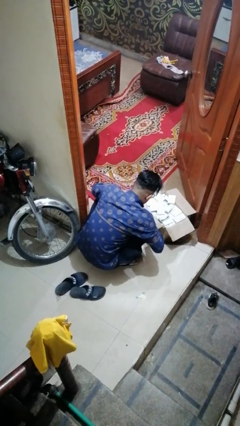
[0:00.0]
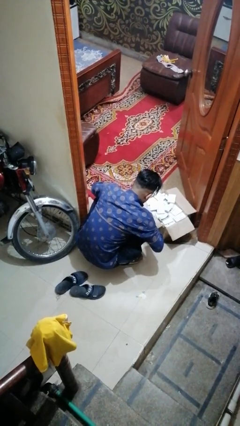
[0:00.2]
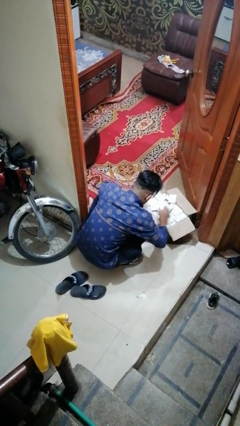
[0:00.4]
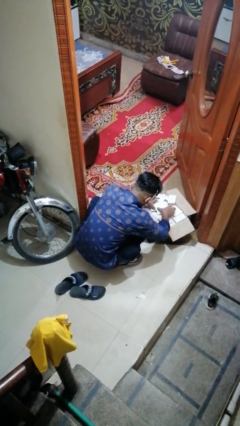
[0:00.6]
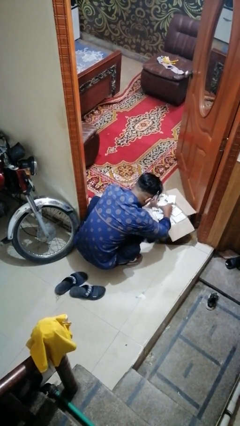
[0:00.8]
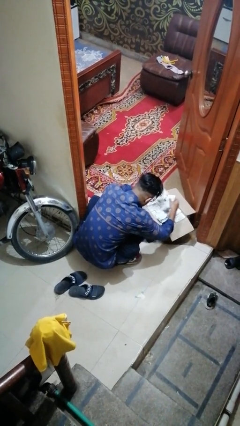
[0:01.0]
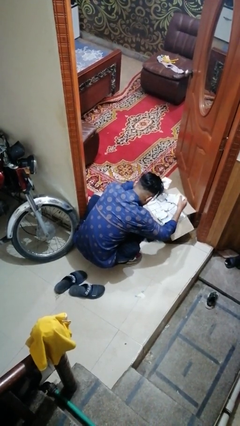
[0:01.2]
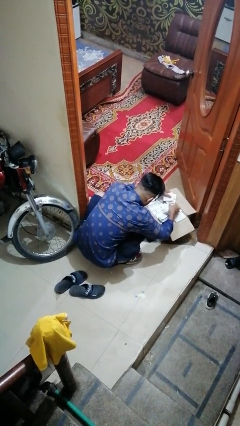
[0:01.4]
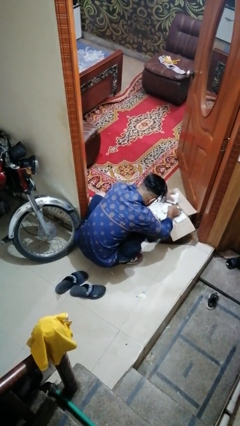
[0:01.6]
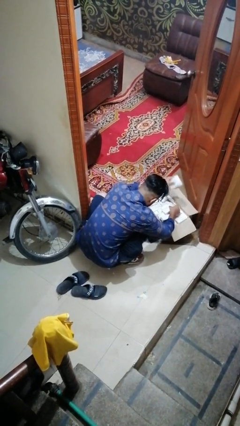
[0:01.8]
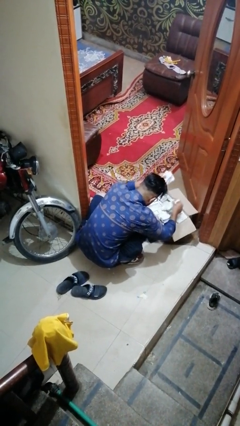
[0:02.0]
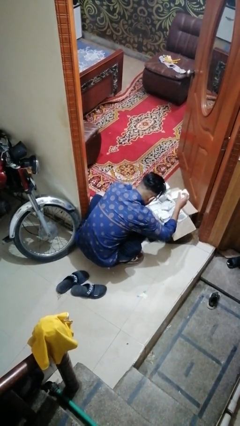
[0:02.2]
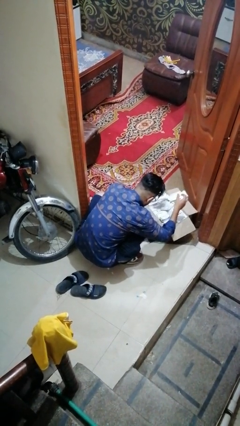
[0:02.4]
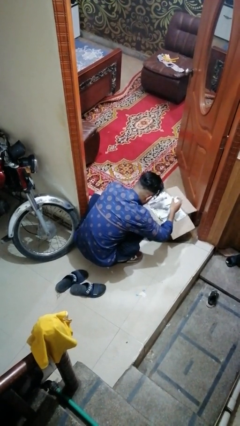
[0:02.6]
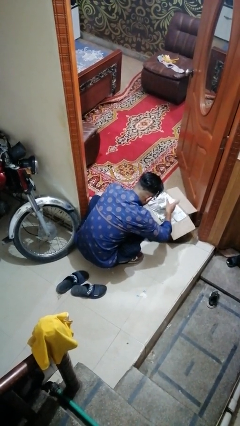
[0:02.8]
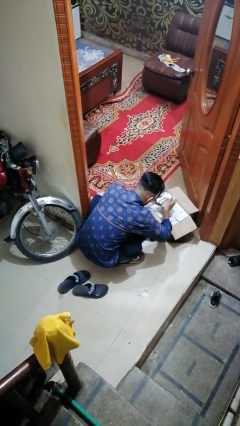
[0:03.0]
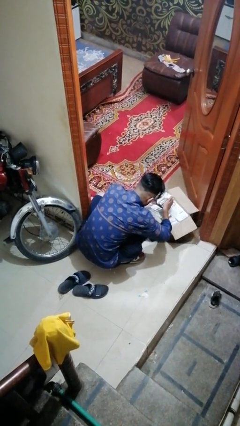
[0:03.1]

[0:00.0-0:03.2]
person searches in box

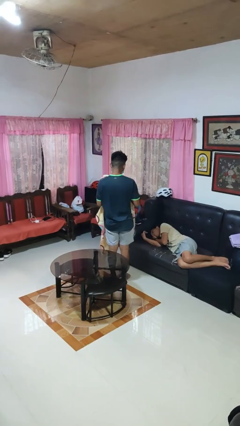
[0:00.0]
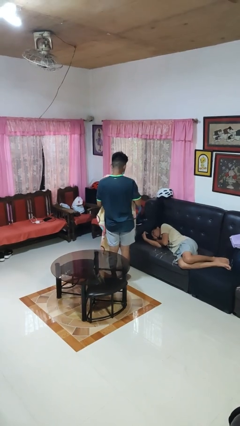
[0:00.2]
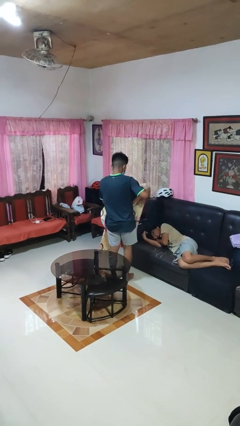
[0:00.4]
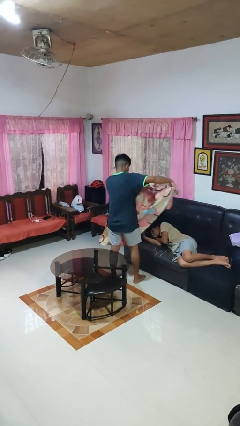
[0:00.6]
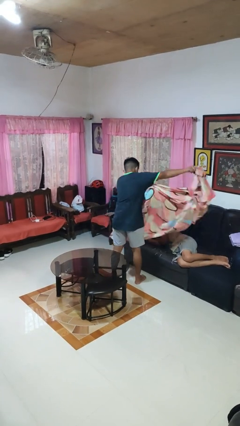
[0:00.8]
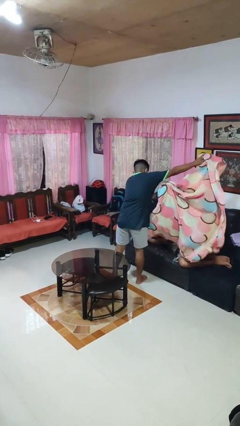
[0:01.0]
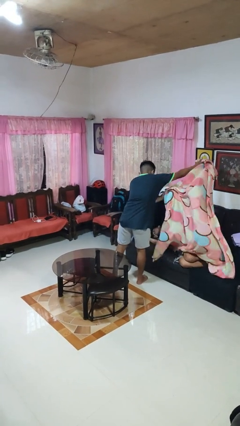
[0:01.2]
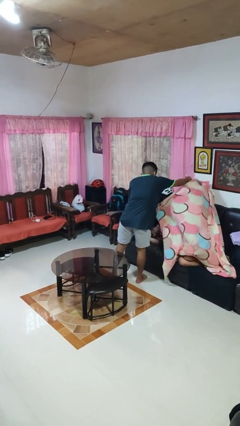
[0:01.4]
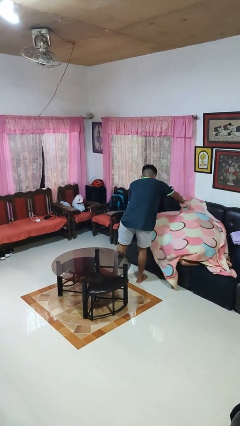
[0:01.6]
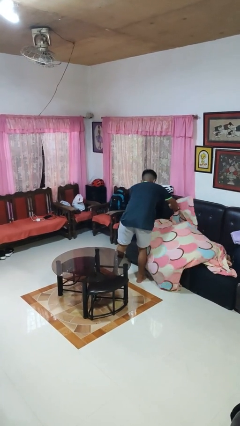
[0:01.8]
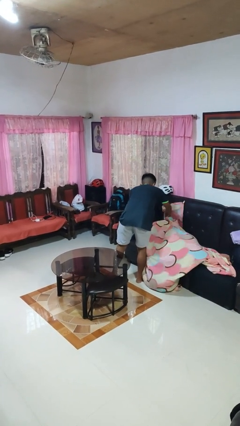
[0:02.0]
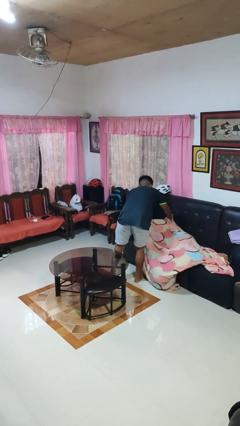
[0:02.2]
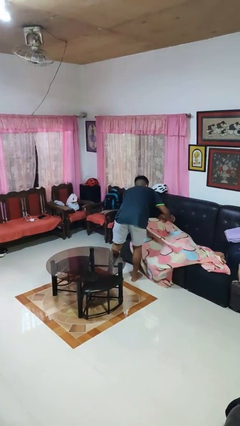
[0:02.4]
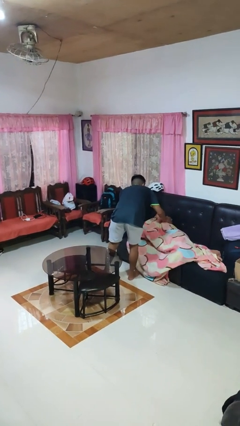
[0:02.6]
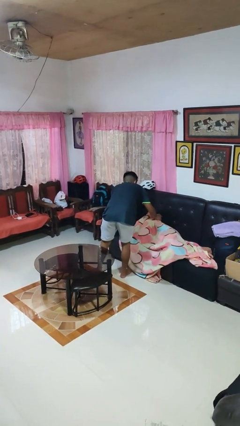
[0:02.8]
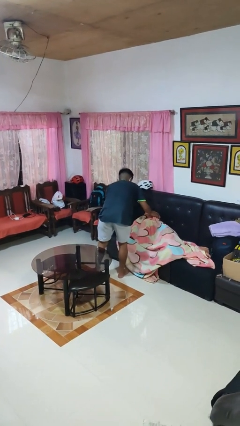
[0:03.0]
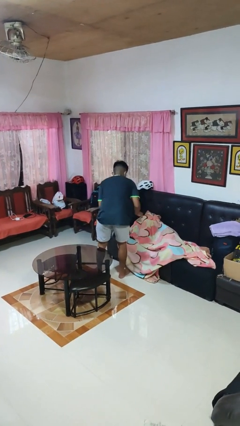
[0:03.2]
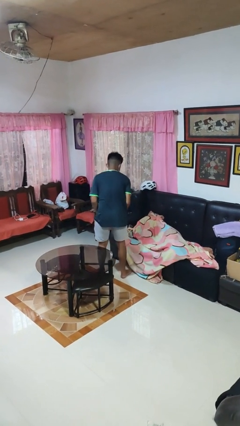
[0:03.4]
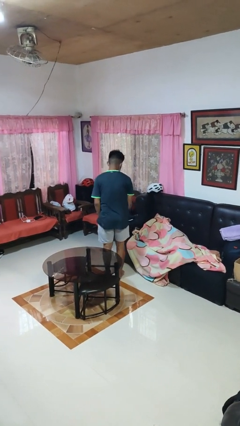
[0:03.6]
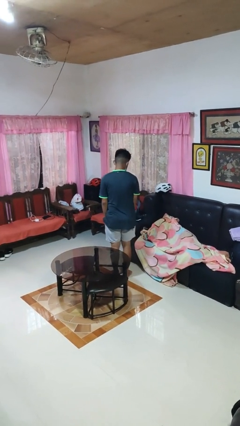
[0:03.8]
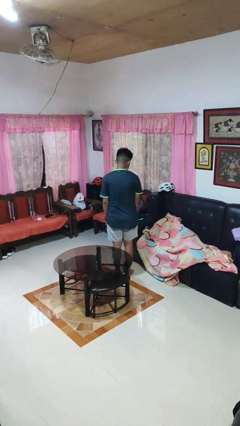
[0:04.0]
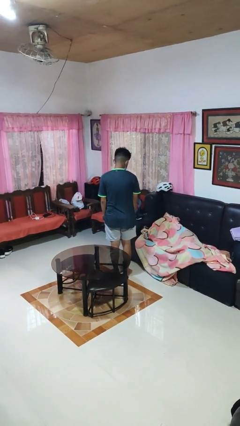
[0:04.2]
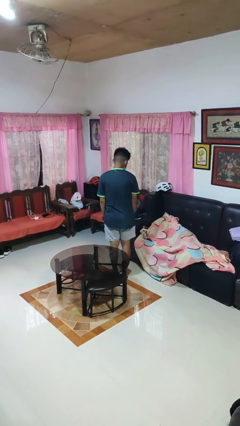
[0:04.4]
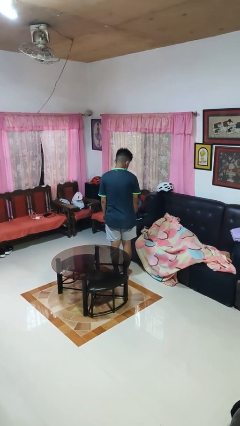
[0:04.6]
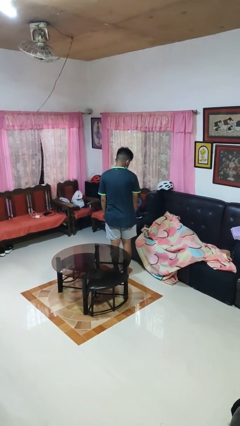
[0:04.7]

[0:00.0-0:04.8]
person covers friend with blanket

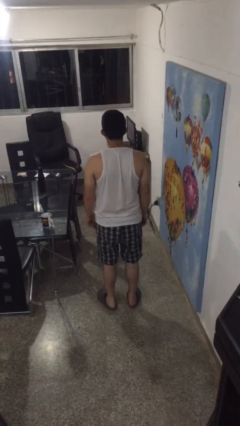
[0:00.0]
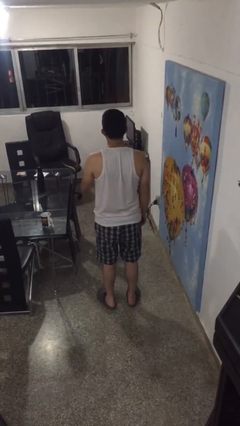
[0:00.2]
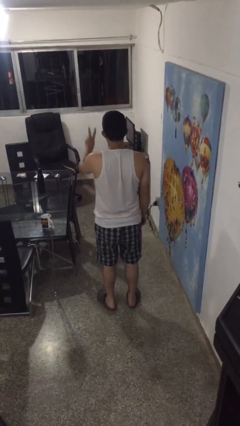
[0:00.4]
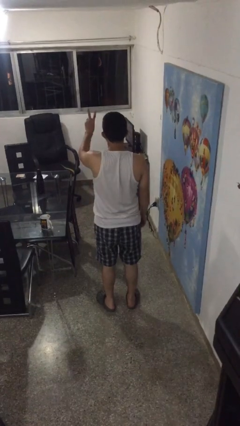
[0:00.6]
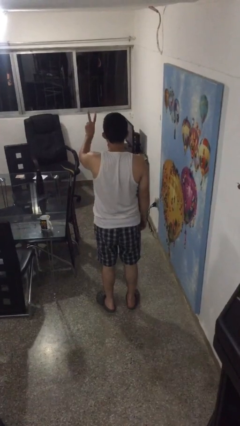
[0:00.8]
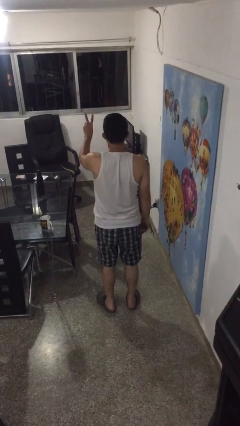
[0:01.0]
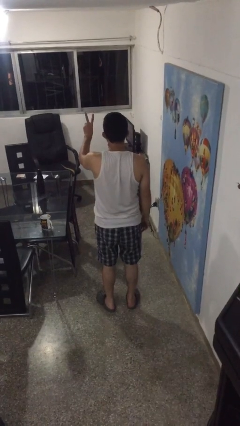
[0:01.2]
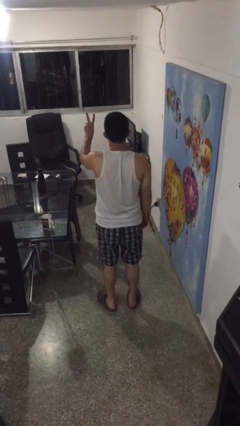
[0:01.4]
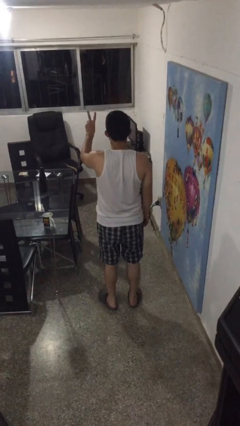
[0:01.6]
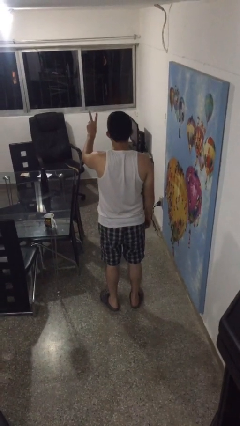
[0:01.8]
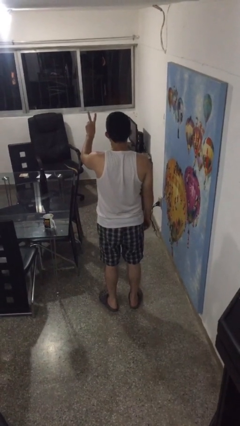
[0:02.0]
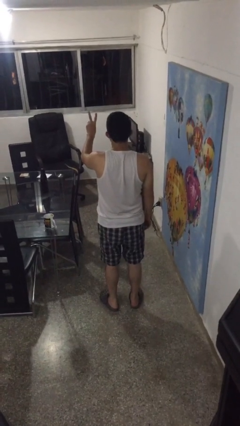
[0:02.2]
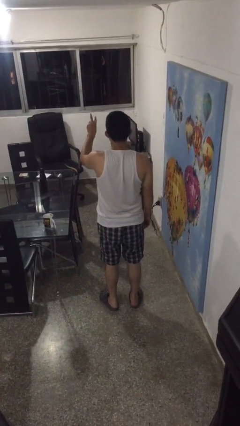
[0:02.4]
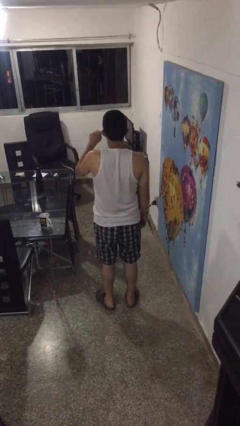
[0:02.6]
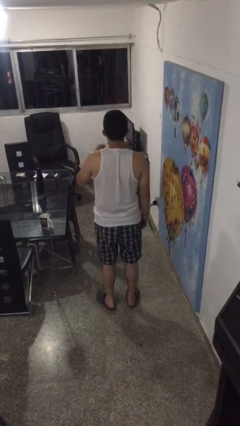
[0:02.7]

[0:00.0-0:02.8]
person gestures peace

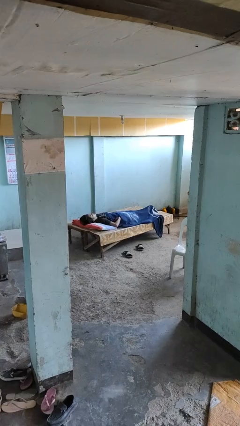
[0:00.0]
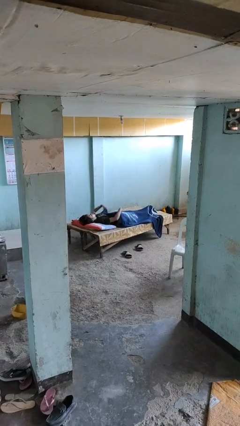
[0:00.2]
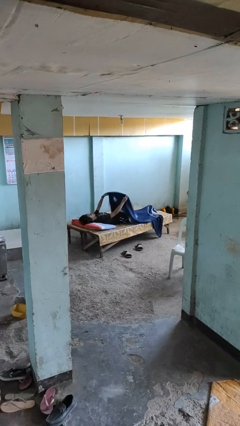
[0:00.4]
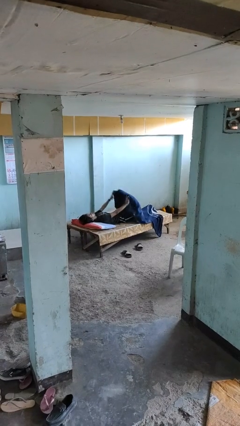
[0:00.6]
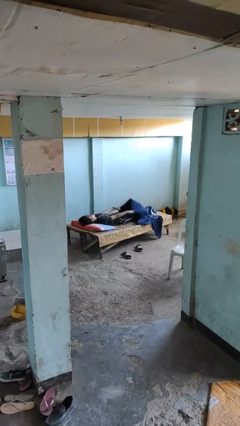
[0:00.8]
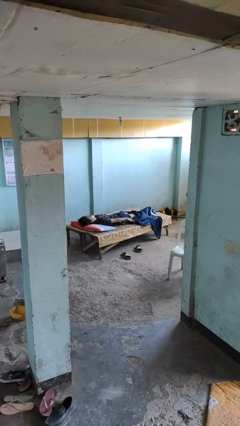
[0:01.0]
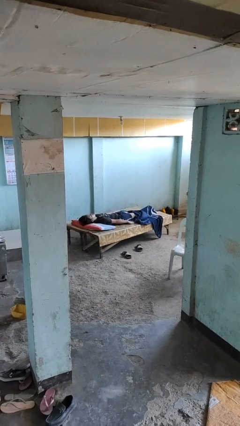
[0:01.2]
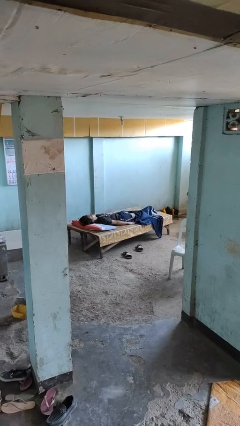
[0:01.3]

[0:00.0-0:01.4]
person uncovers with blanket

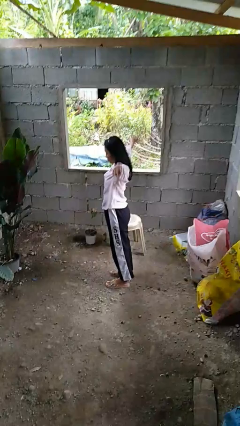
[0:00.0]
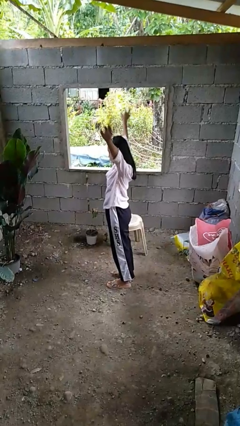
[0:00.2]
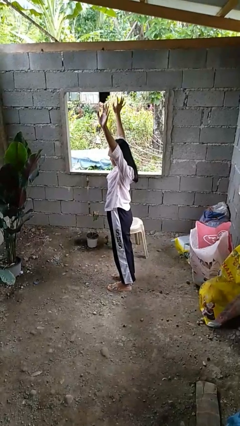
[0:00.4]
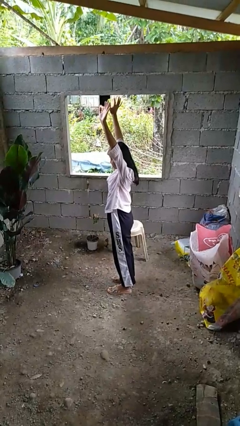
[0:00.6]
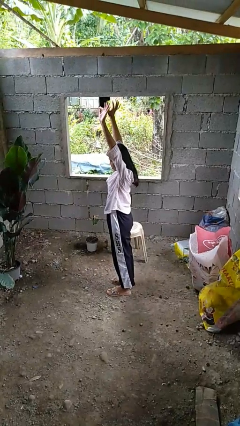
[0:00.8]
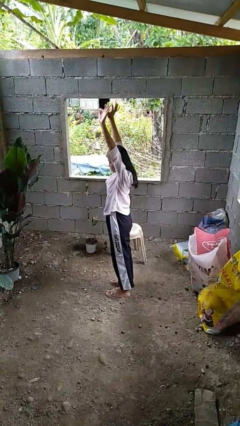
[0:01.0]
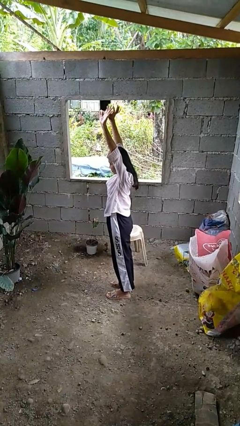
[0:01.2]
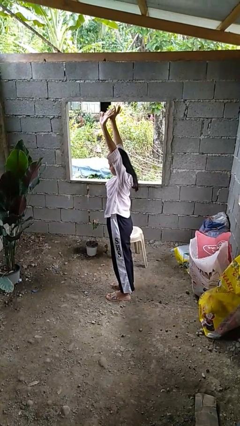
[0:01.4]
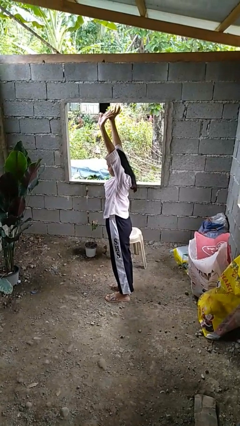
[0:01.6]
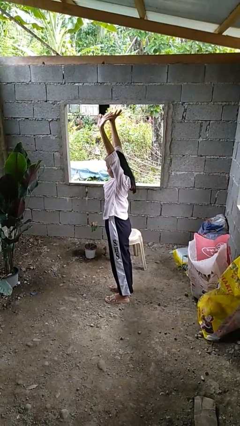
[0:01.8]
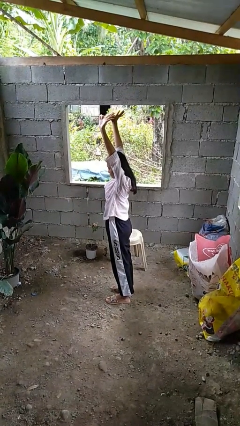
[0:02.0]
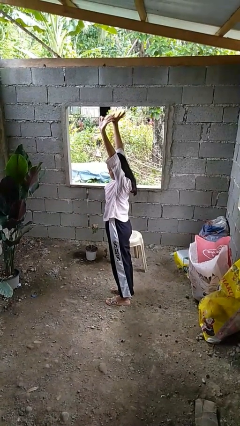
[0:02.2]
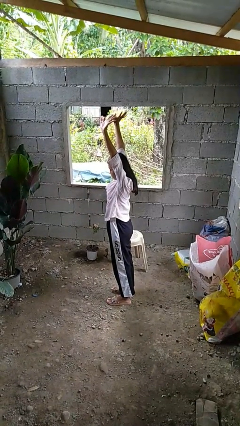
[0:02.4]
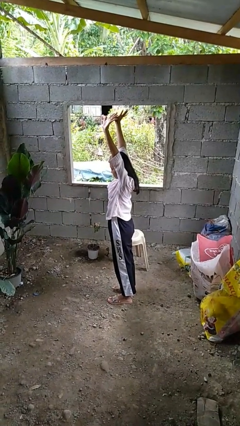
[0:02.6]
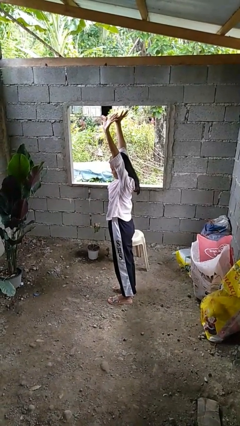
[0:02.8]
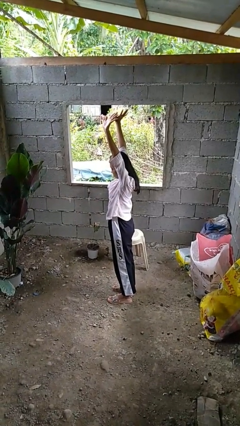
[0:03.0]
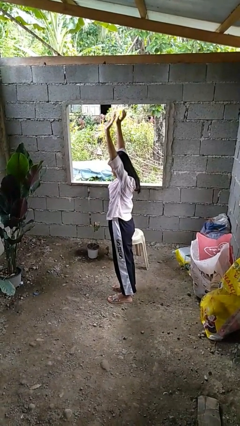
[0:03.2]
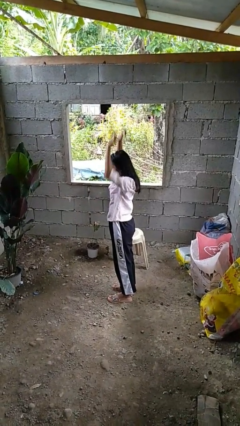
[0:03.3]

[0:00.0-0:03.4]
person stretches arms over head

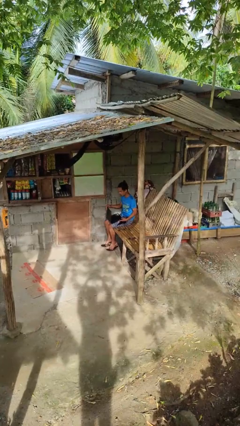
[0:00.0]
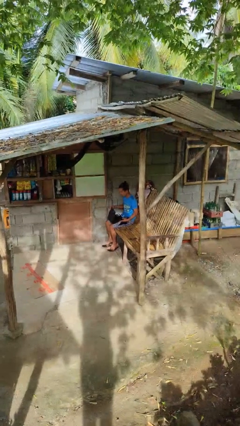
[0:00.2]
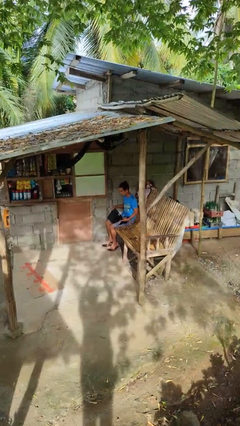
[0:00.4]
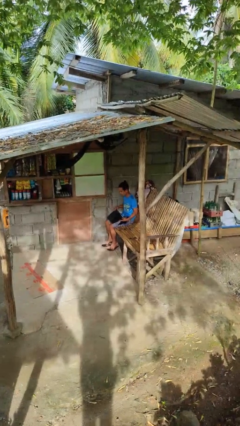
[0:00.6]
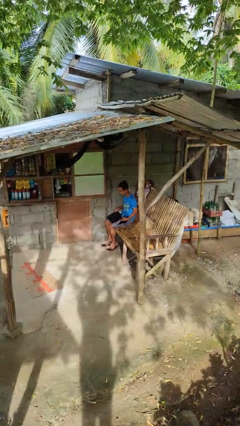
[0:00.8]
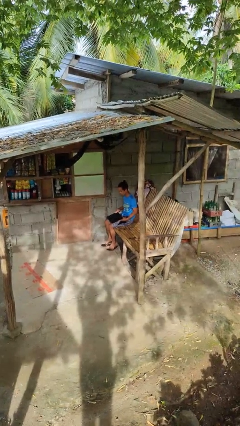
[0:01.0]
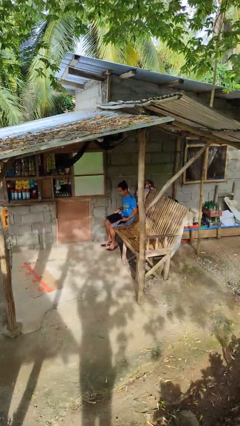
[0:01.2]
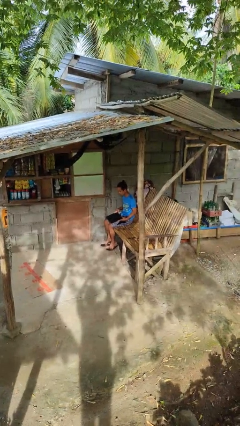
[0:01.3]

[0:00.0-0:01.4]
person closes laptop
